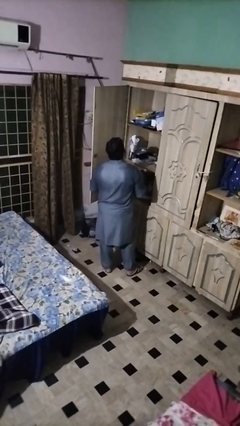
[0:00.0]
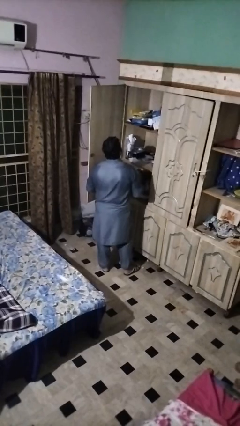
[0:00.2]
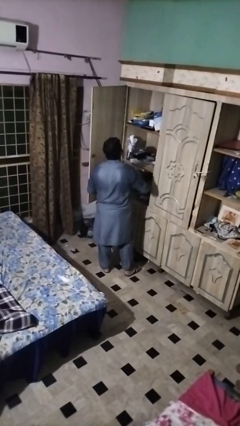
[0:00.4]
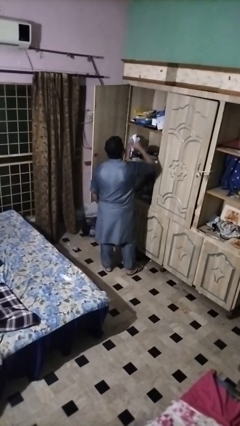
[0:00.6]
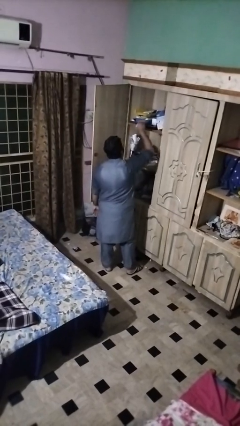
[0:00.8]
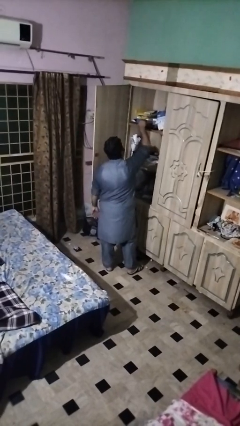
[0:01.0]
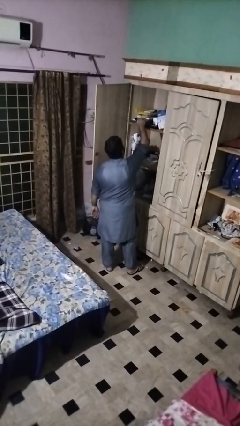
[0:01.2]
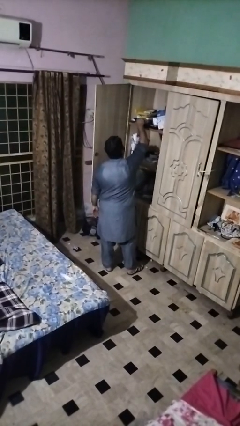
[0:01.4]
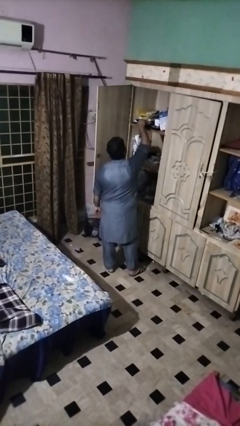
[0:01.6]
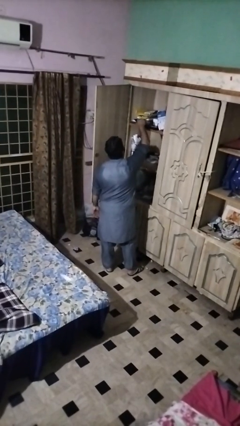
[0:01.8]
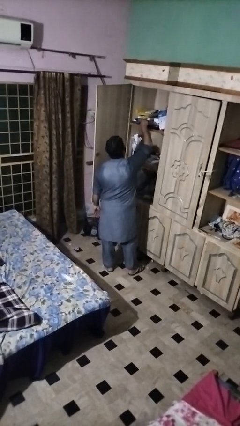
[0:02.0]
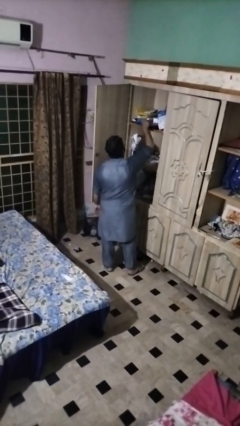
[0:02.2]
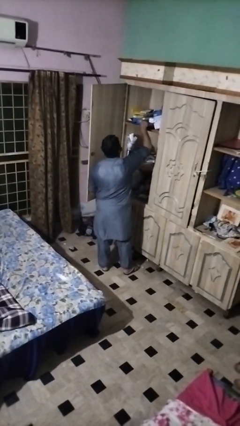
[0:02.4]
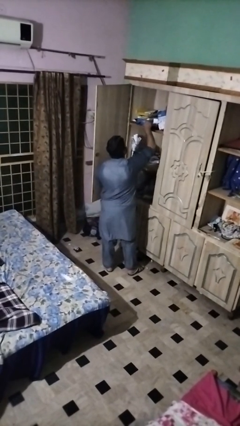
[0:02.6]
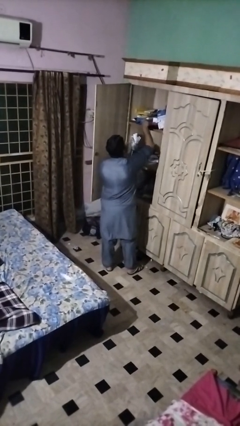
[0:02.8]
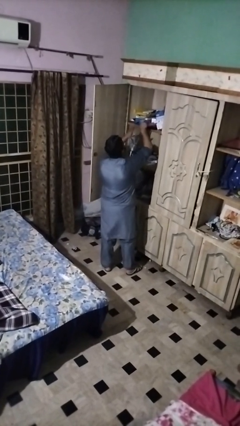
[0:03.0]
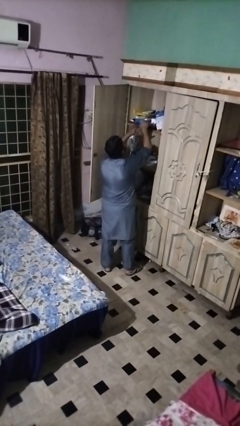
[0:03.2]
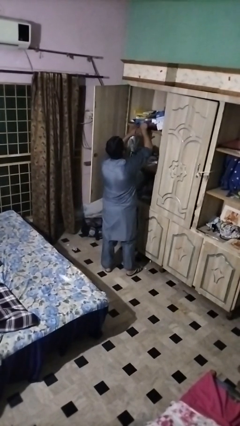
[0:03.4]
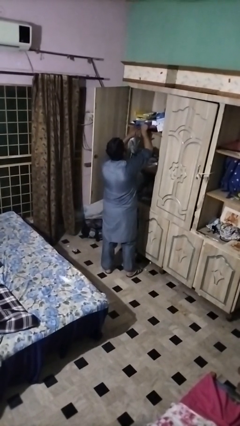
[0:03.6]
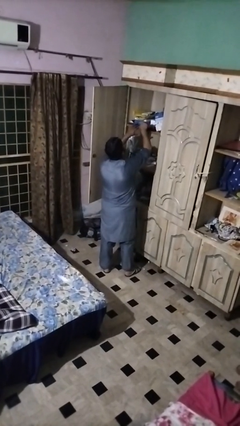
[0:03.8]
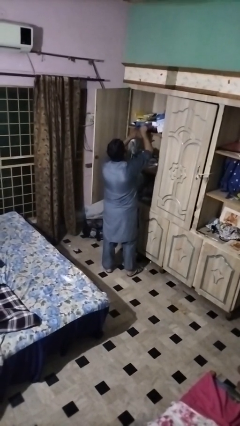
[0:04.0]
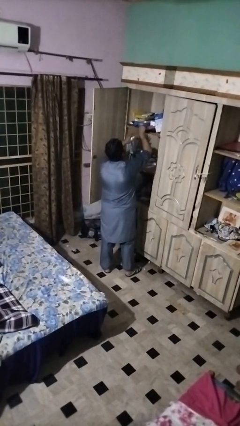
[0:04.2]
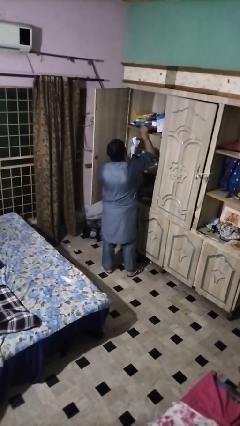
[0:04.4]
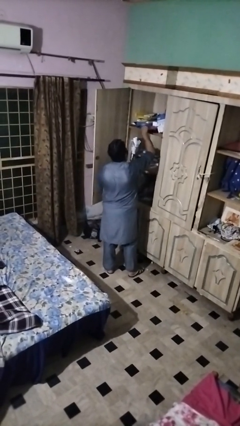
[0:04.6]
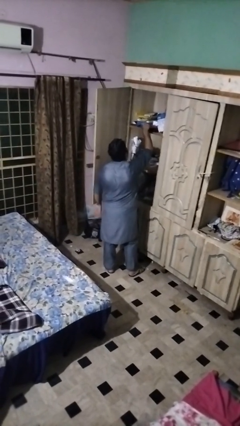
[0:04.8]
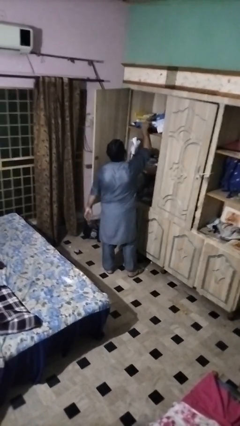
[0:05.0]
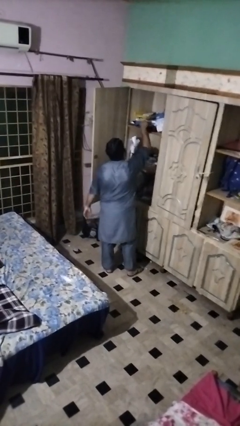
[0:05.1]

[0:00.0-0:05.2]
person dusts furniture

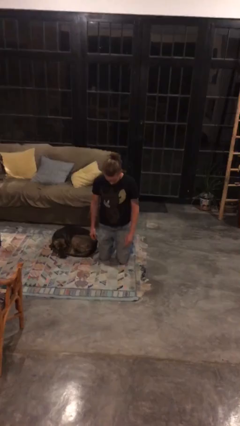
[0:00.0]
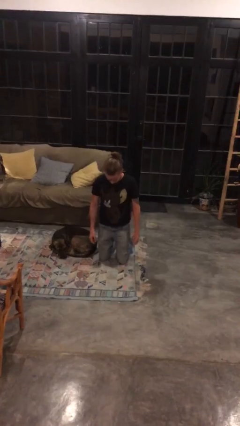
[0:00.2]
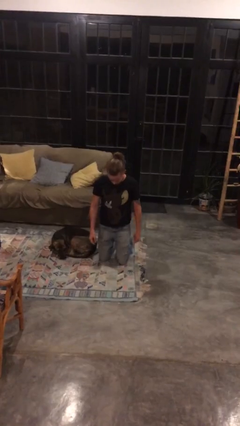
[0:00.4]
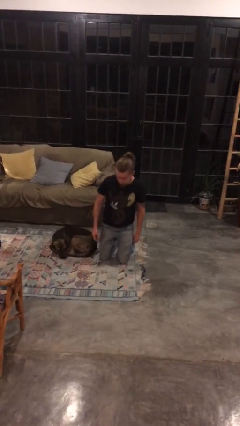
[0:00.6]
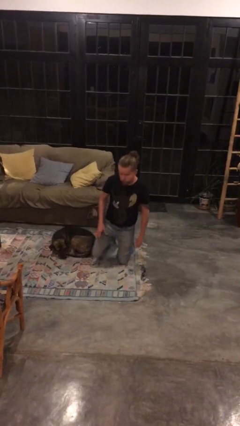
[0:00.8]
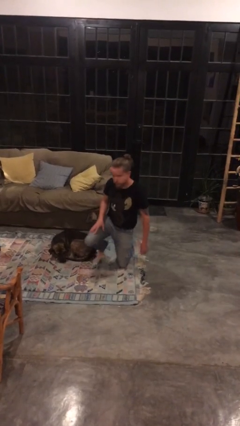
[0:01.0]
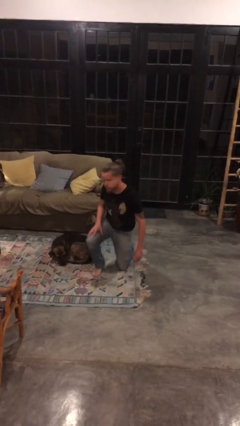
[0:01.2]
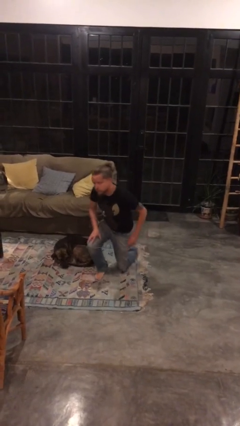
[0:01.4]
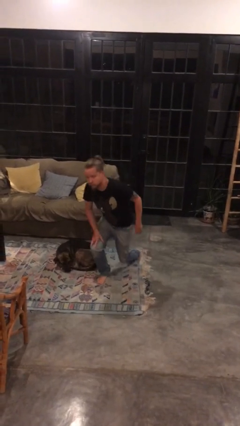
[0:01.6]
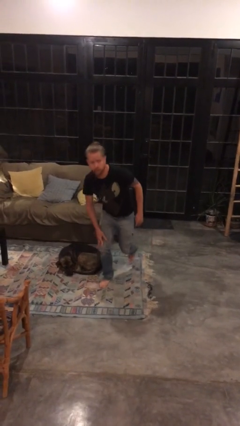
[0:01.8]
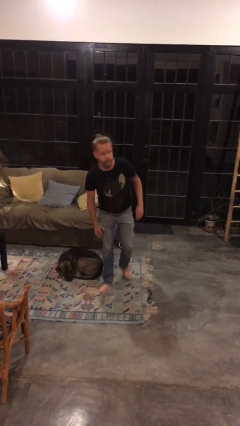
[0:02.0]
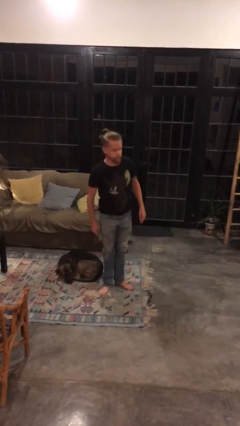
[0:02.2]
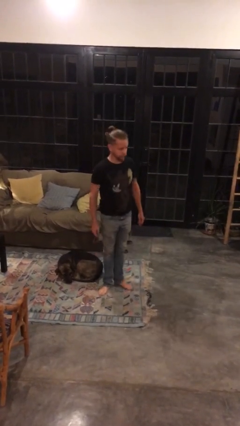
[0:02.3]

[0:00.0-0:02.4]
person stands up from floor

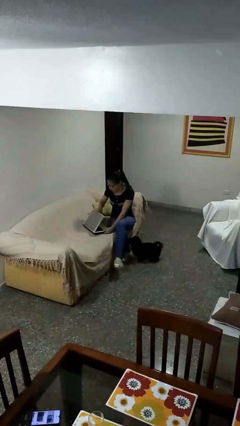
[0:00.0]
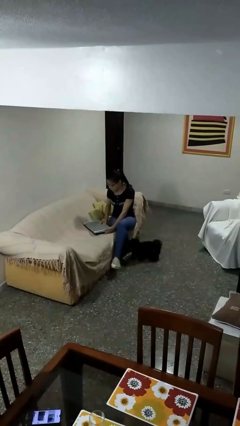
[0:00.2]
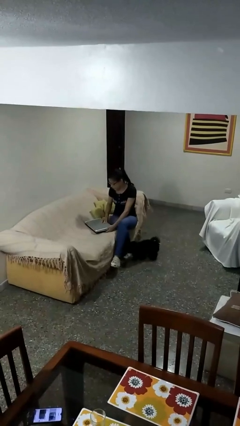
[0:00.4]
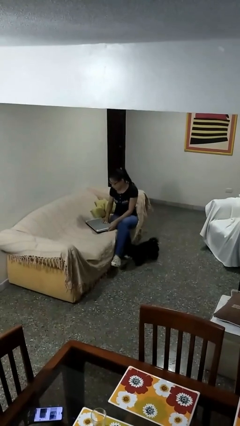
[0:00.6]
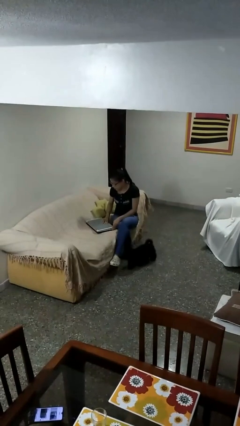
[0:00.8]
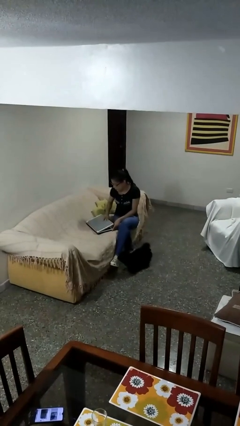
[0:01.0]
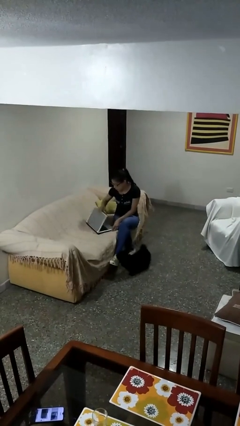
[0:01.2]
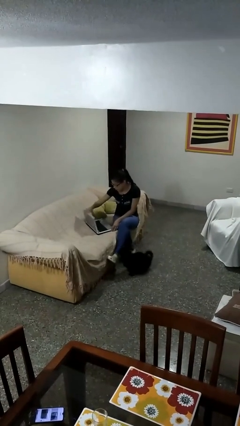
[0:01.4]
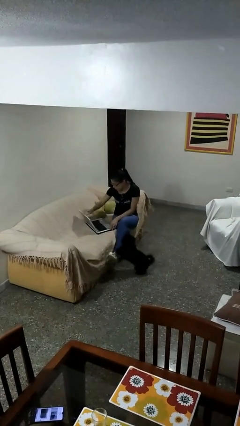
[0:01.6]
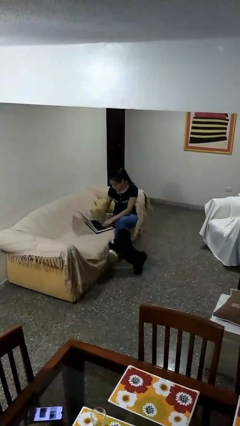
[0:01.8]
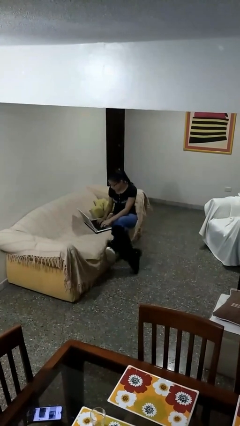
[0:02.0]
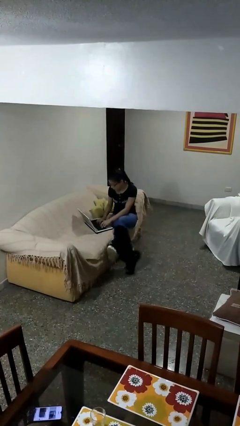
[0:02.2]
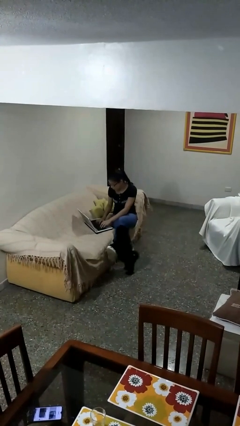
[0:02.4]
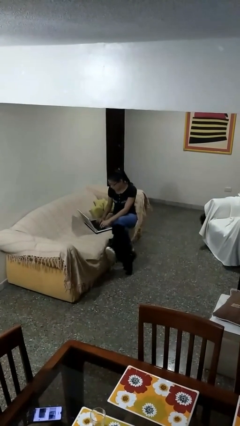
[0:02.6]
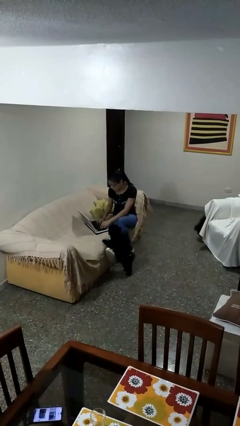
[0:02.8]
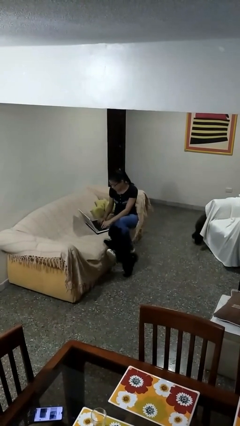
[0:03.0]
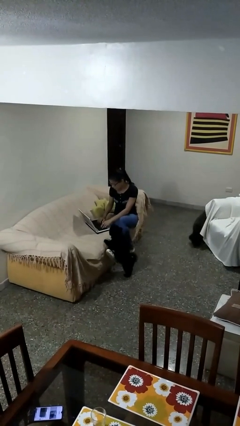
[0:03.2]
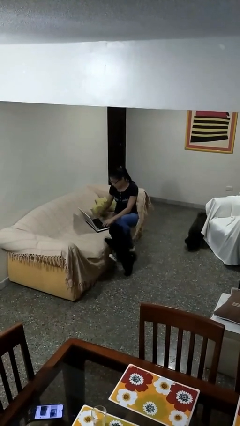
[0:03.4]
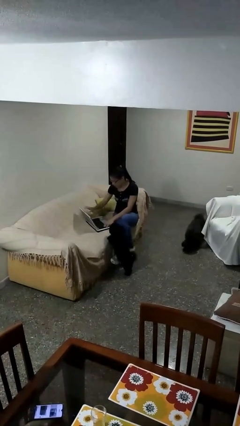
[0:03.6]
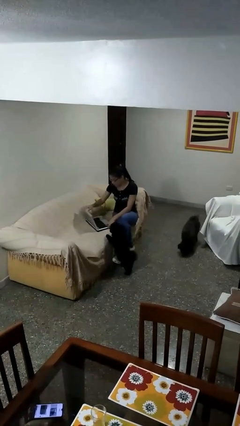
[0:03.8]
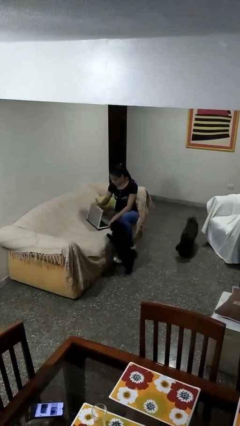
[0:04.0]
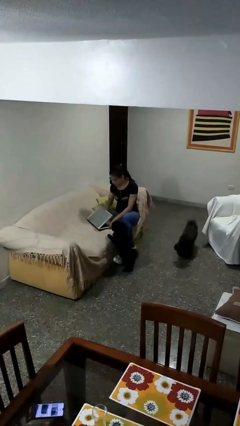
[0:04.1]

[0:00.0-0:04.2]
person interacts with laptop

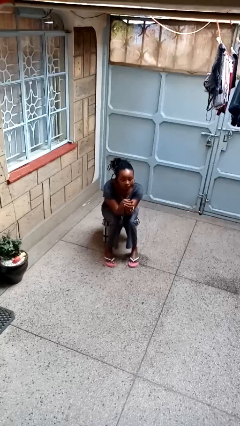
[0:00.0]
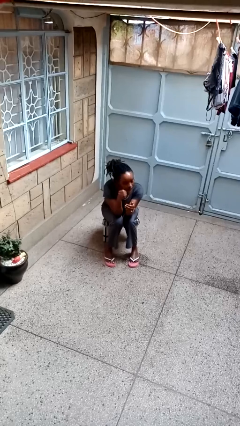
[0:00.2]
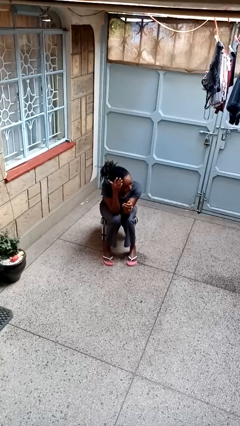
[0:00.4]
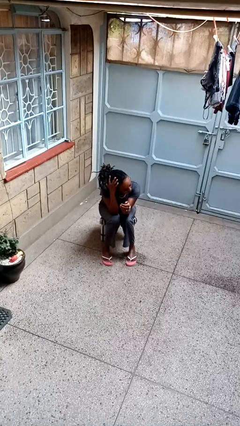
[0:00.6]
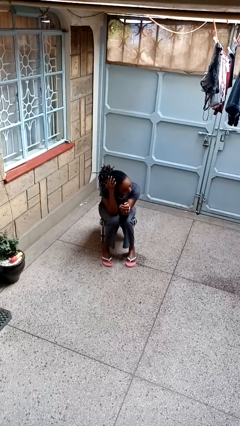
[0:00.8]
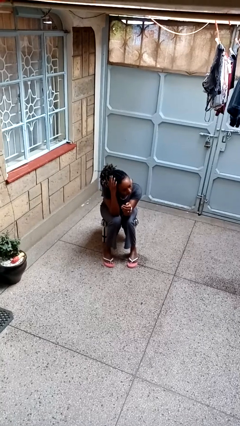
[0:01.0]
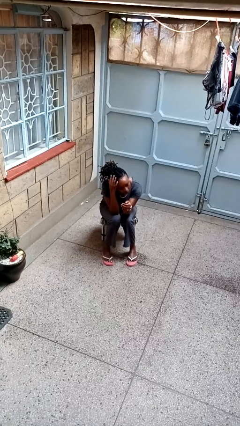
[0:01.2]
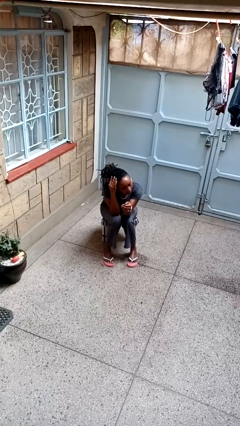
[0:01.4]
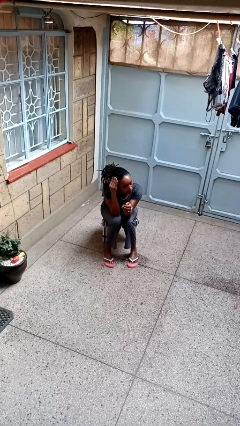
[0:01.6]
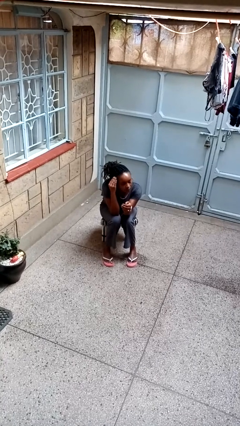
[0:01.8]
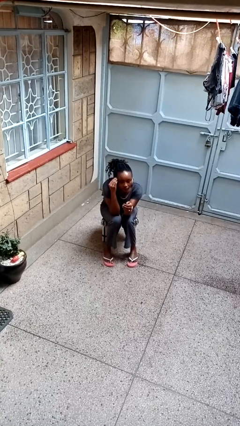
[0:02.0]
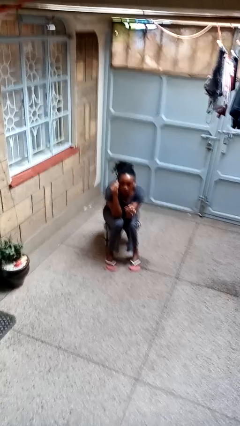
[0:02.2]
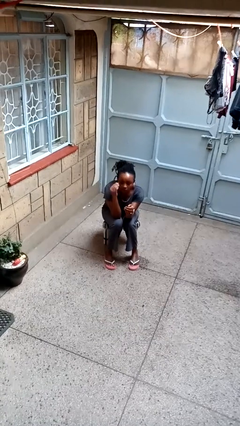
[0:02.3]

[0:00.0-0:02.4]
person strokes hair

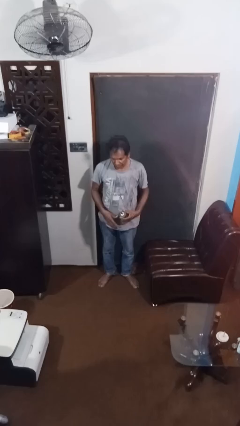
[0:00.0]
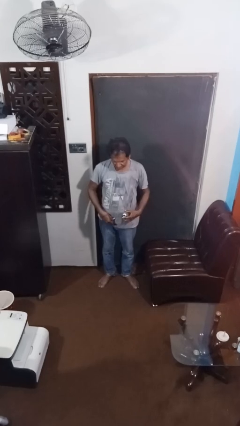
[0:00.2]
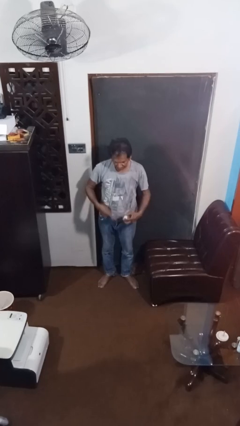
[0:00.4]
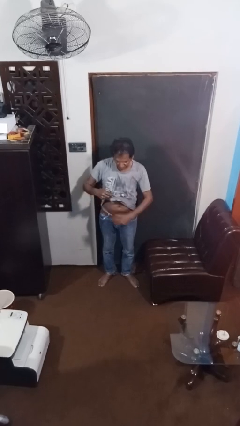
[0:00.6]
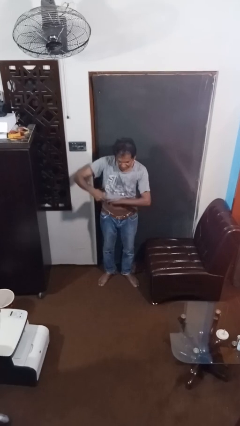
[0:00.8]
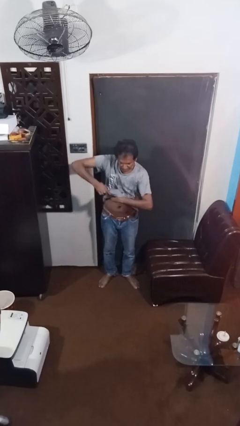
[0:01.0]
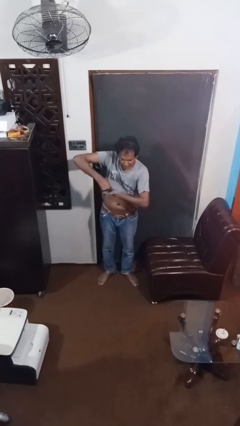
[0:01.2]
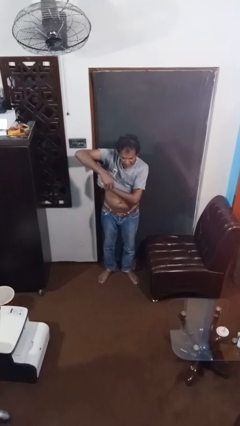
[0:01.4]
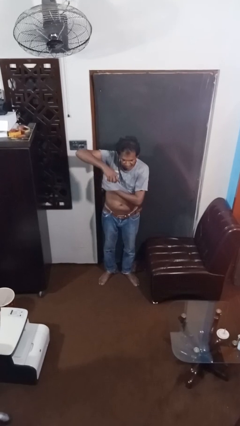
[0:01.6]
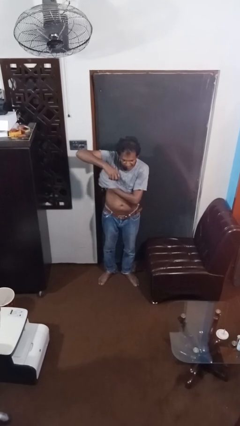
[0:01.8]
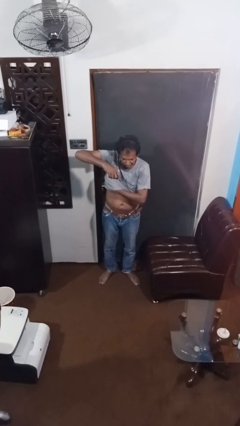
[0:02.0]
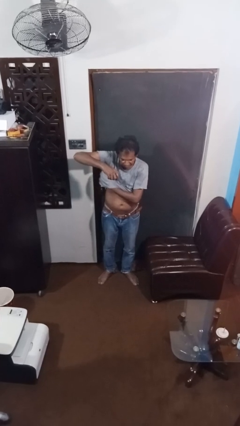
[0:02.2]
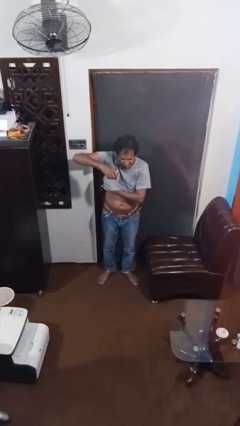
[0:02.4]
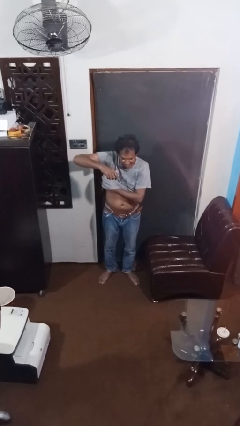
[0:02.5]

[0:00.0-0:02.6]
person applies deodorant

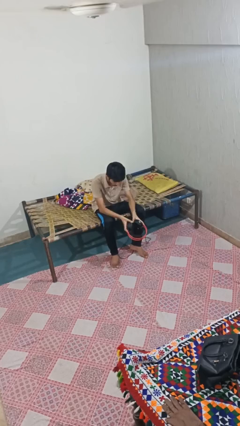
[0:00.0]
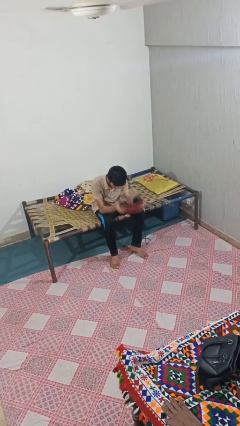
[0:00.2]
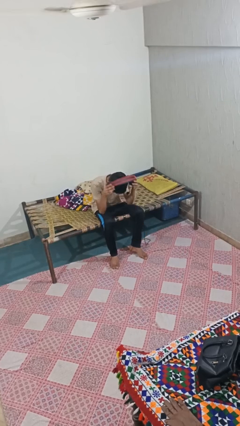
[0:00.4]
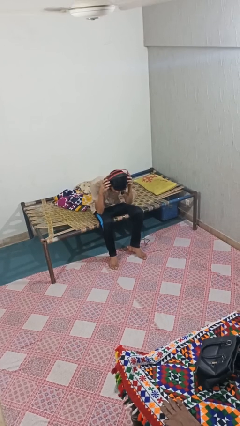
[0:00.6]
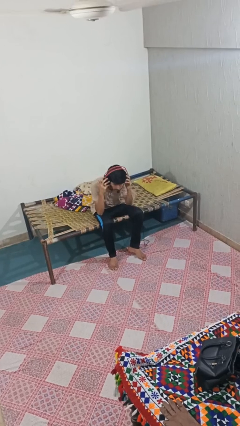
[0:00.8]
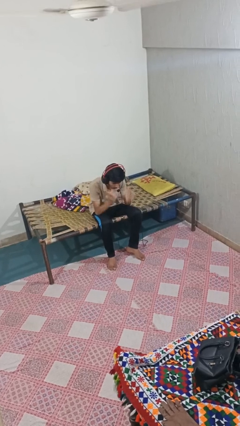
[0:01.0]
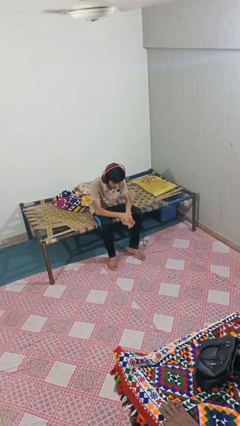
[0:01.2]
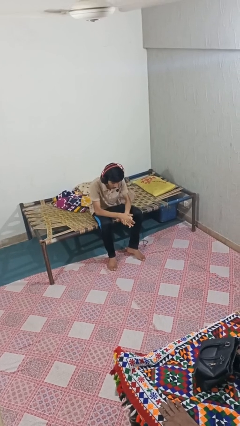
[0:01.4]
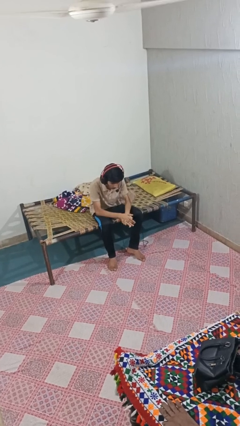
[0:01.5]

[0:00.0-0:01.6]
person puts on headphones
